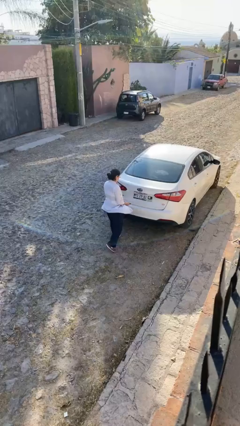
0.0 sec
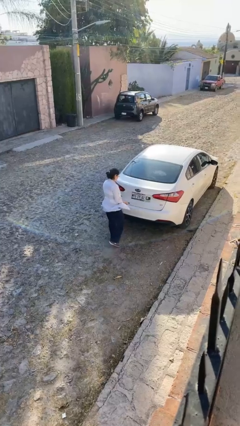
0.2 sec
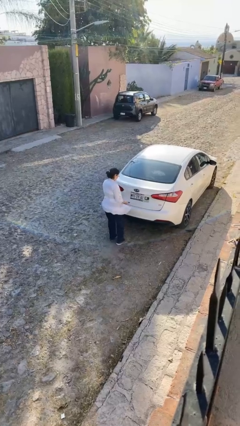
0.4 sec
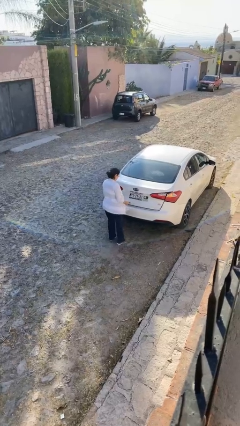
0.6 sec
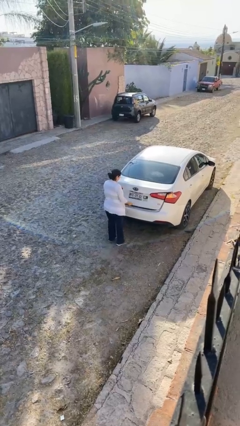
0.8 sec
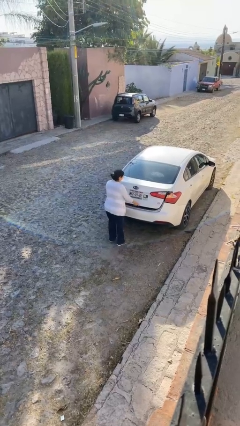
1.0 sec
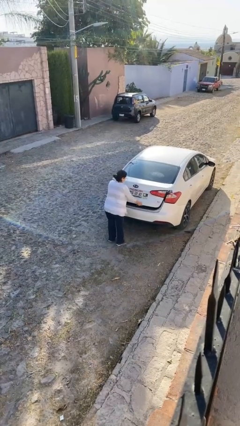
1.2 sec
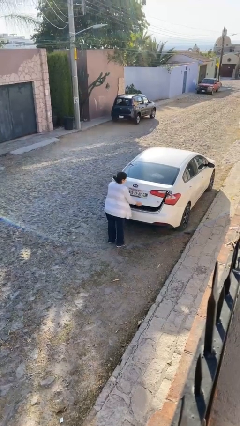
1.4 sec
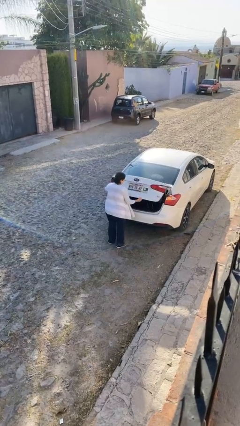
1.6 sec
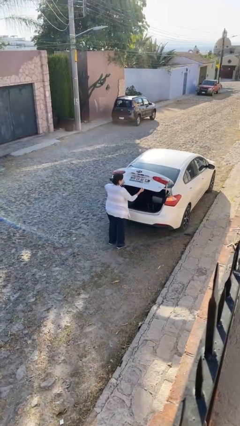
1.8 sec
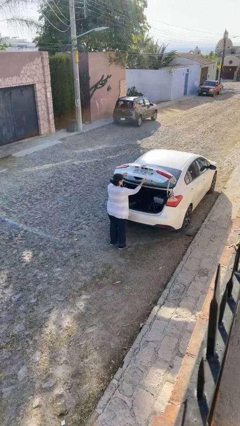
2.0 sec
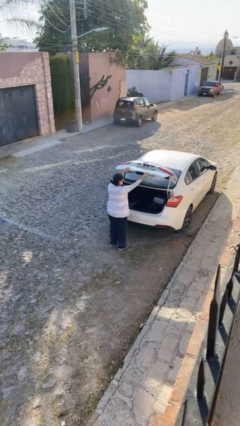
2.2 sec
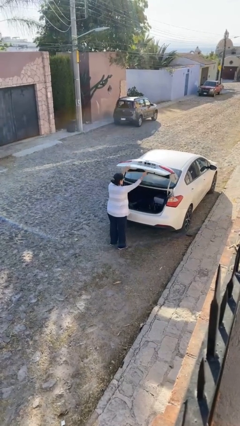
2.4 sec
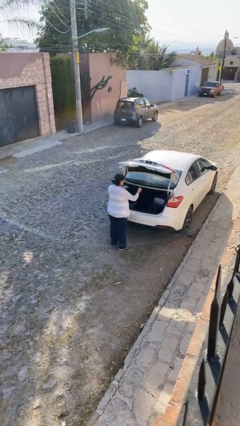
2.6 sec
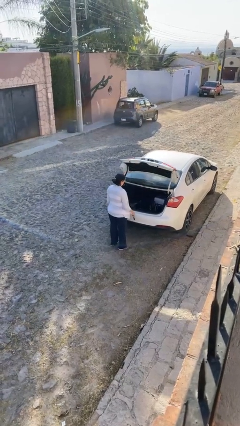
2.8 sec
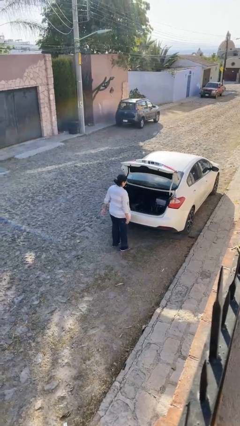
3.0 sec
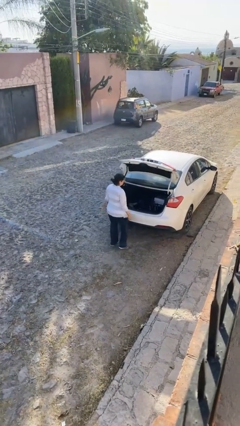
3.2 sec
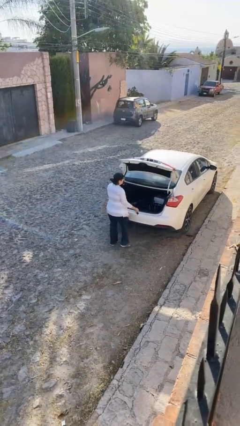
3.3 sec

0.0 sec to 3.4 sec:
person opens car trunk

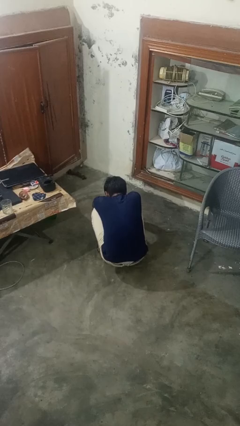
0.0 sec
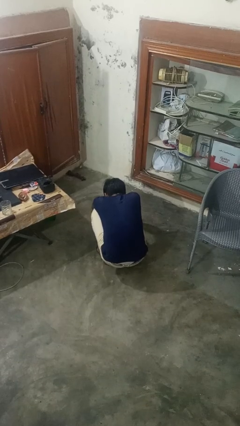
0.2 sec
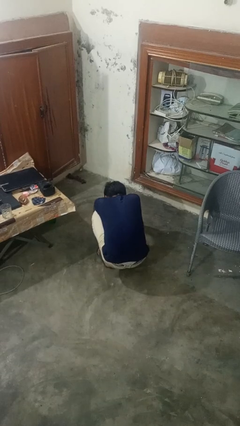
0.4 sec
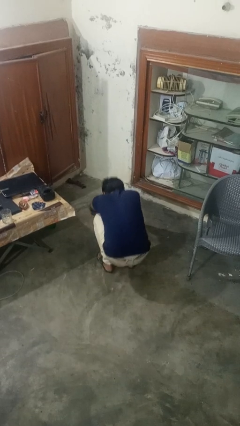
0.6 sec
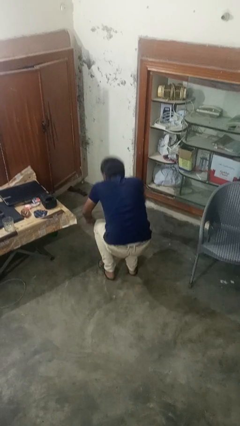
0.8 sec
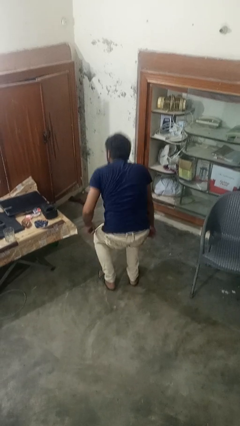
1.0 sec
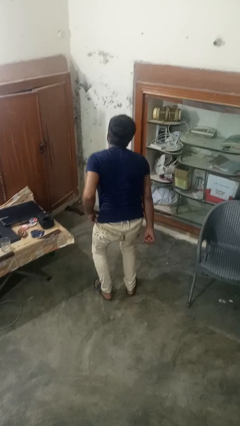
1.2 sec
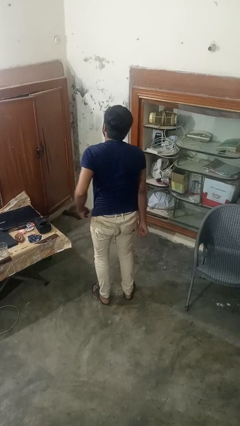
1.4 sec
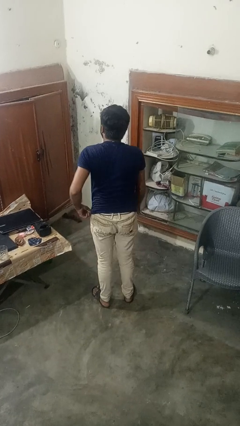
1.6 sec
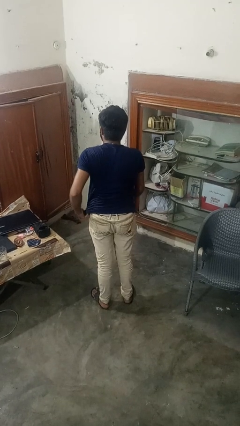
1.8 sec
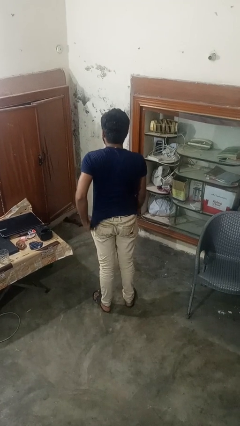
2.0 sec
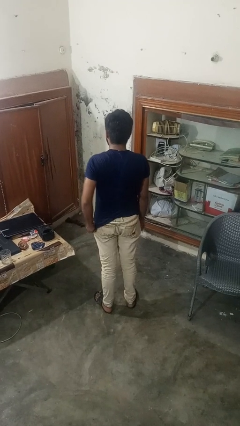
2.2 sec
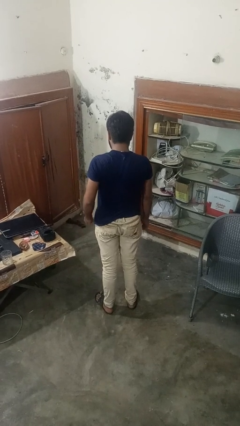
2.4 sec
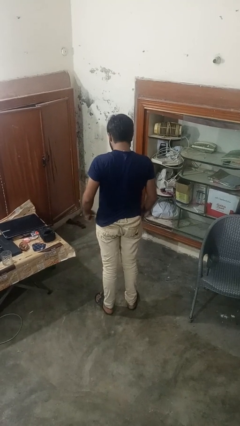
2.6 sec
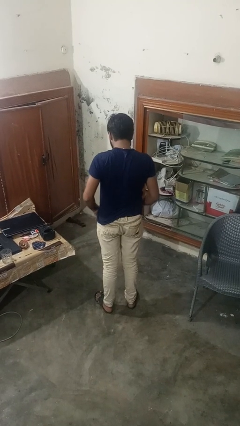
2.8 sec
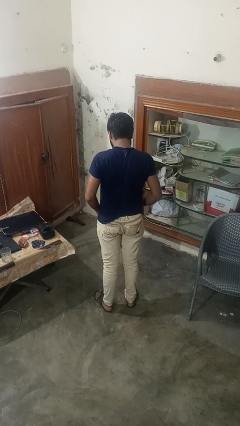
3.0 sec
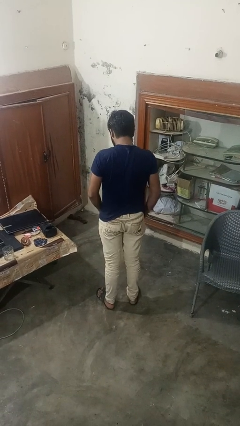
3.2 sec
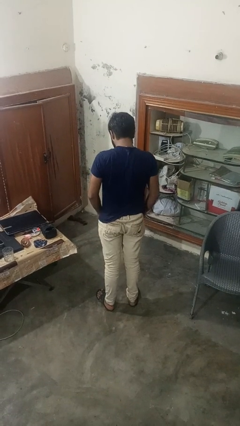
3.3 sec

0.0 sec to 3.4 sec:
person stands up

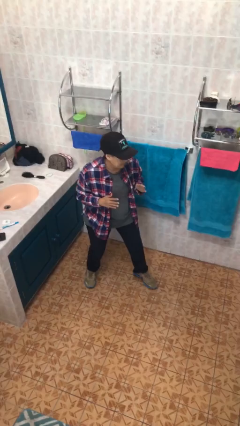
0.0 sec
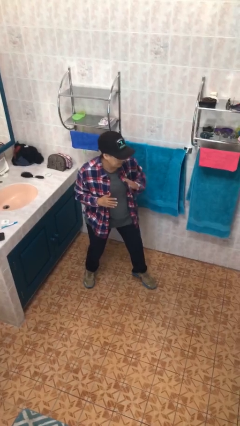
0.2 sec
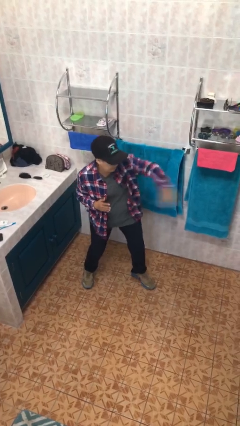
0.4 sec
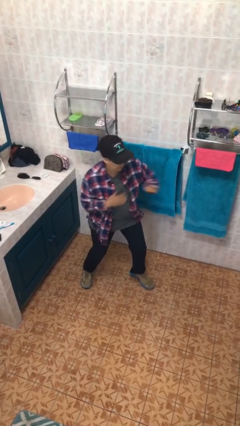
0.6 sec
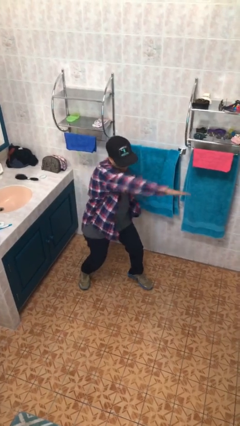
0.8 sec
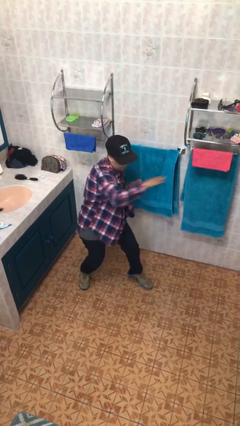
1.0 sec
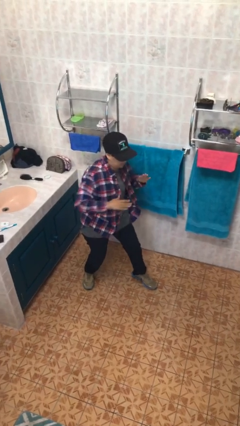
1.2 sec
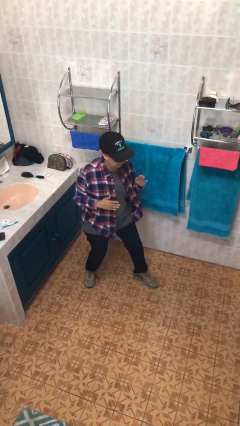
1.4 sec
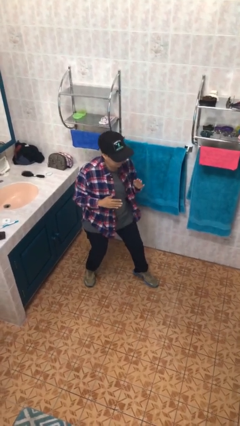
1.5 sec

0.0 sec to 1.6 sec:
person karate chop

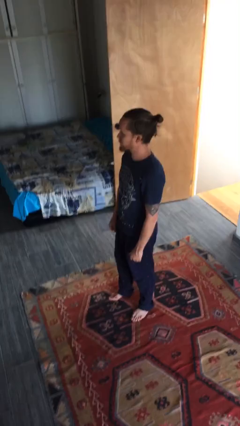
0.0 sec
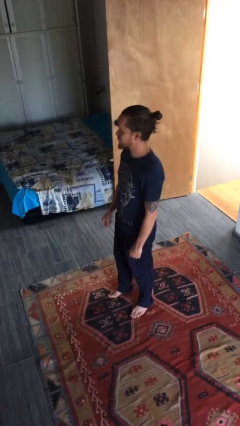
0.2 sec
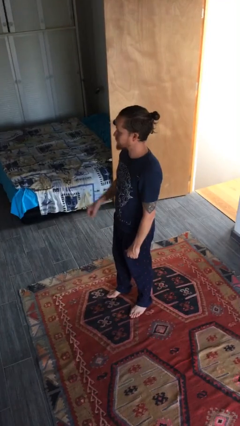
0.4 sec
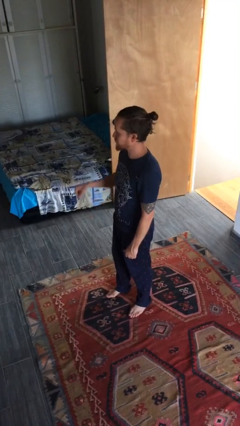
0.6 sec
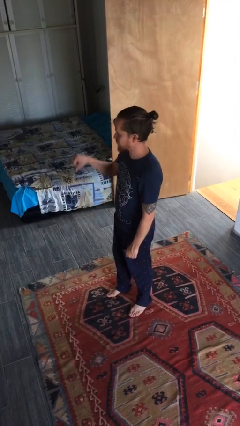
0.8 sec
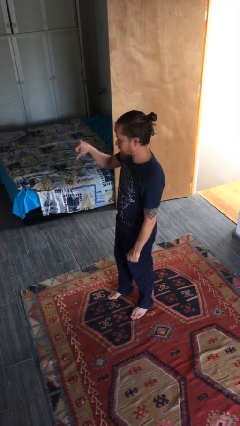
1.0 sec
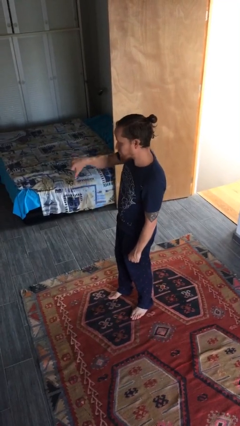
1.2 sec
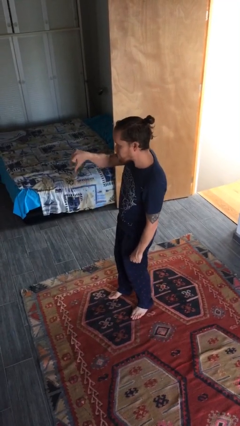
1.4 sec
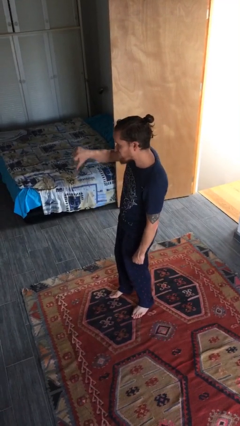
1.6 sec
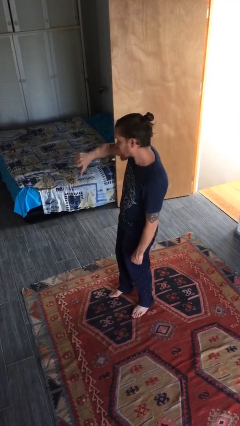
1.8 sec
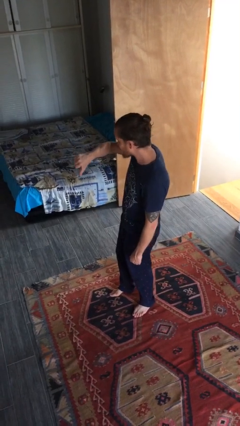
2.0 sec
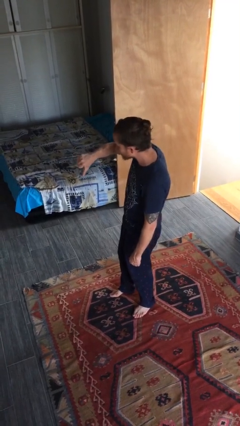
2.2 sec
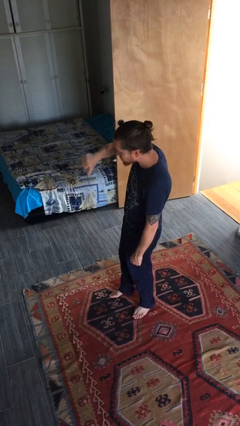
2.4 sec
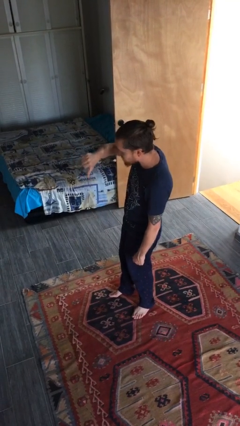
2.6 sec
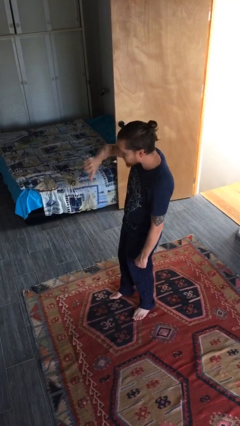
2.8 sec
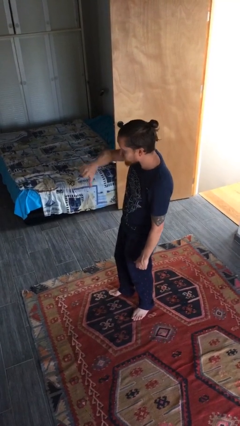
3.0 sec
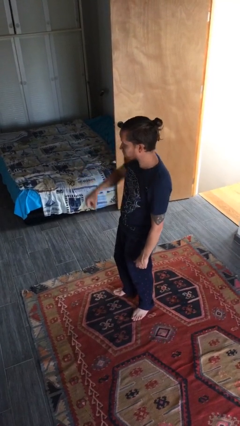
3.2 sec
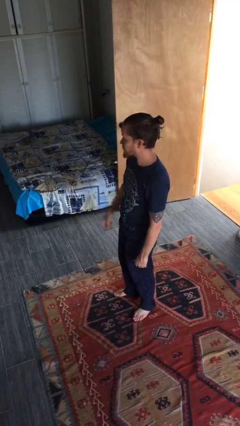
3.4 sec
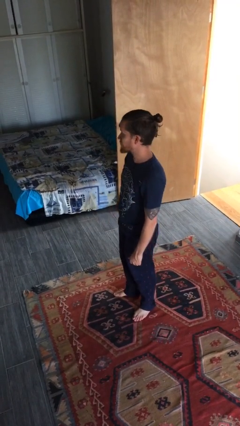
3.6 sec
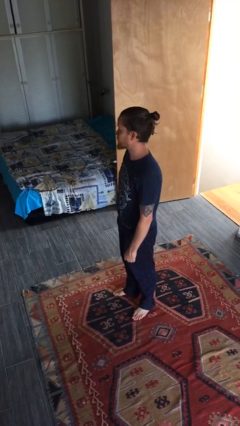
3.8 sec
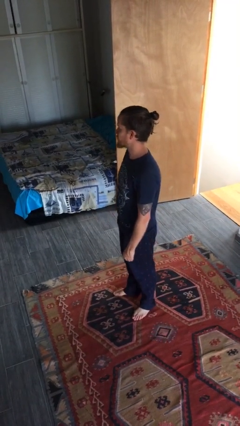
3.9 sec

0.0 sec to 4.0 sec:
person gestures thumbs down

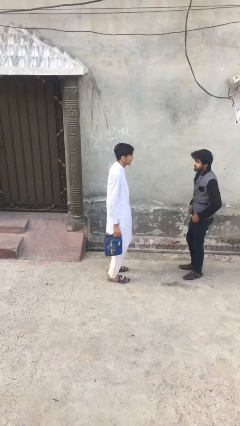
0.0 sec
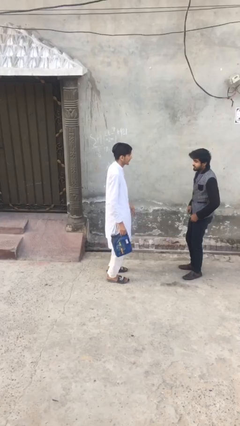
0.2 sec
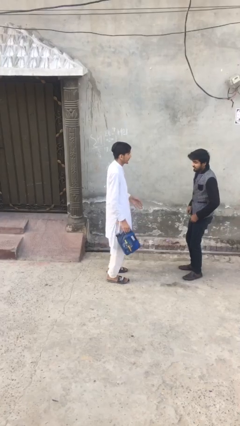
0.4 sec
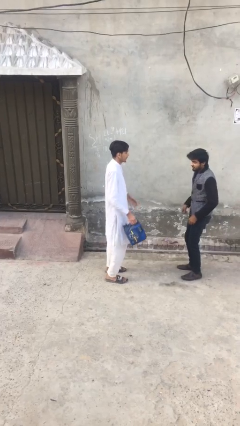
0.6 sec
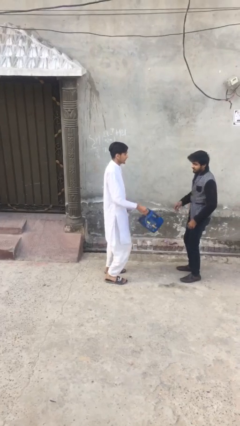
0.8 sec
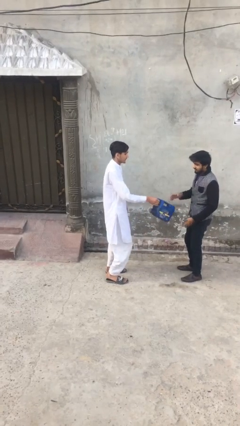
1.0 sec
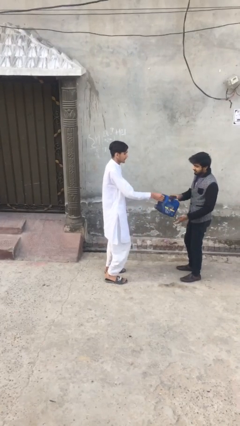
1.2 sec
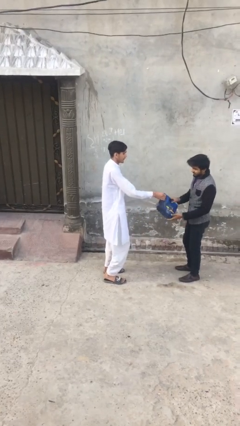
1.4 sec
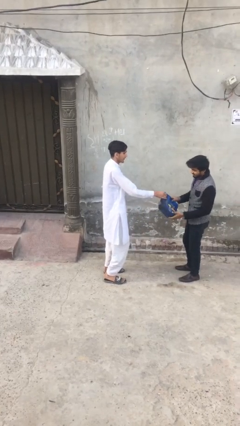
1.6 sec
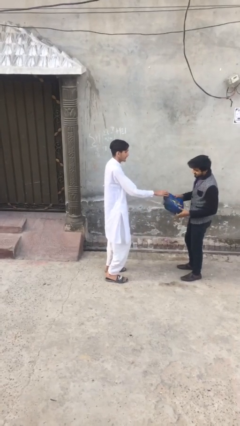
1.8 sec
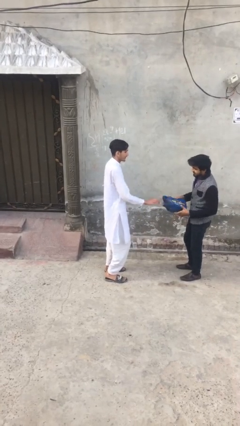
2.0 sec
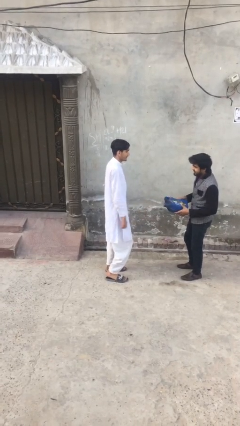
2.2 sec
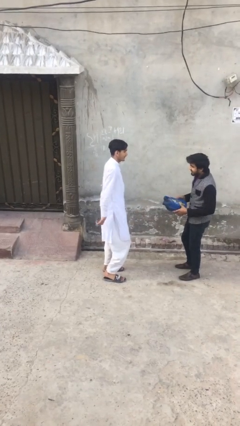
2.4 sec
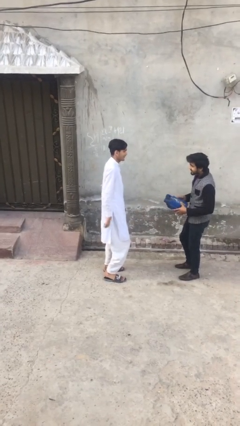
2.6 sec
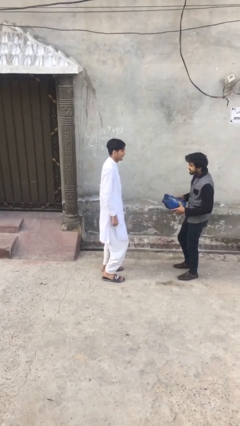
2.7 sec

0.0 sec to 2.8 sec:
person transfers object to person

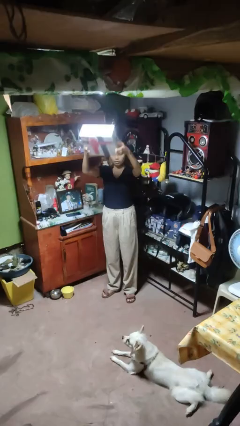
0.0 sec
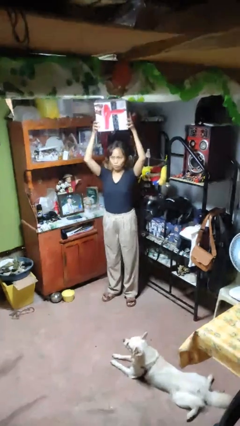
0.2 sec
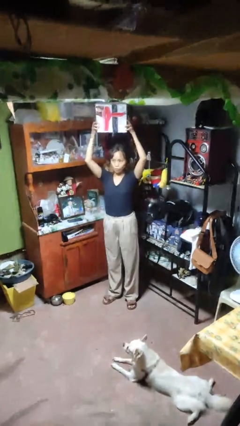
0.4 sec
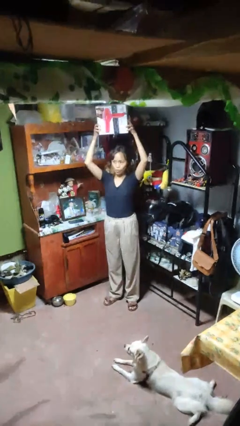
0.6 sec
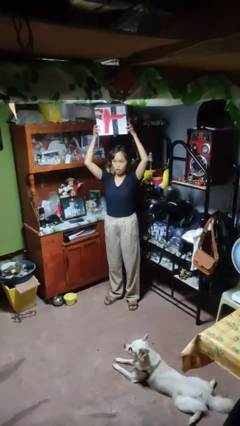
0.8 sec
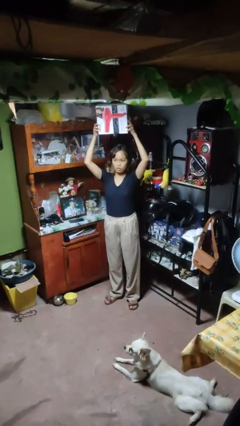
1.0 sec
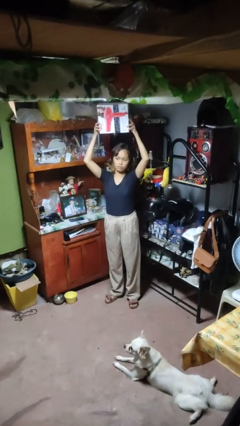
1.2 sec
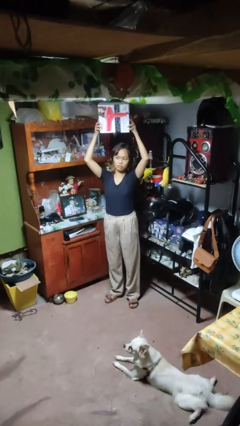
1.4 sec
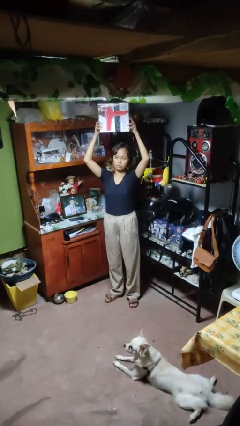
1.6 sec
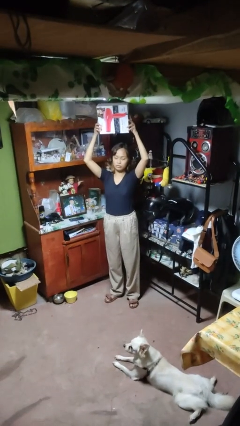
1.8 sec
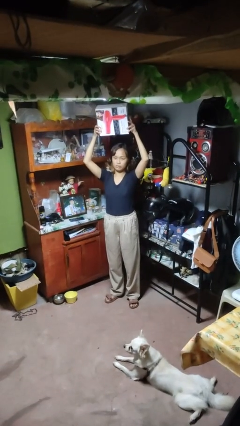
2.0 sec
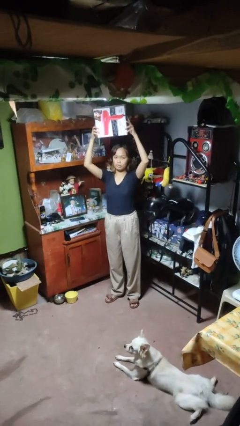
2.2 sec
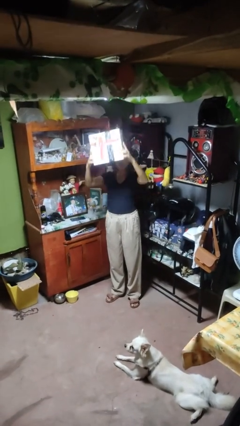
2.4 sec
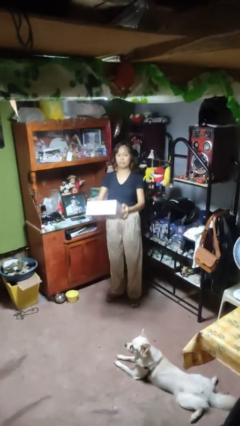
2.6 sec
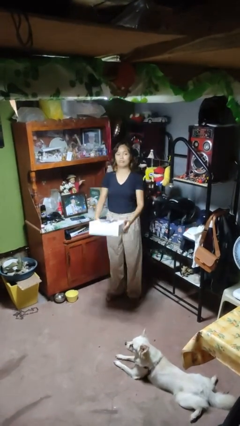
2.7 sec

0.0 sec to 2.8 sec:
person holds object above head
